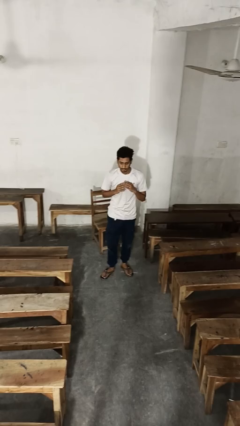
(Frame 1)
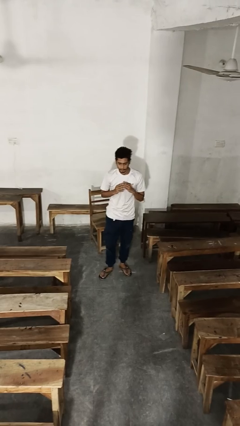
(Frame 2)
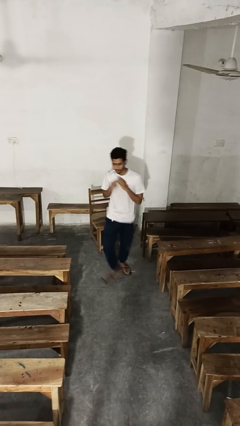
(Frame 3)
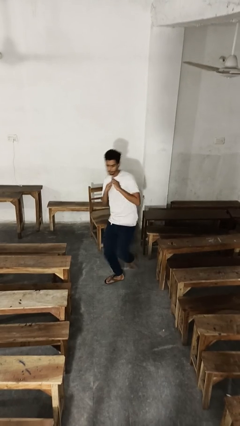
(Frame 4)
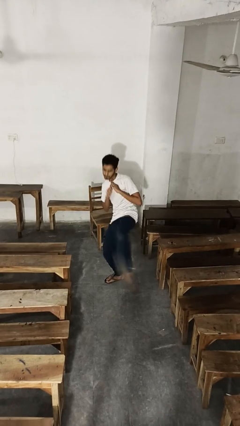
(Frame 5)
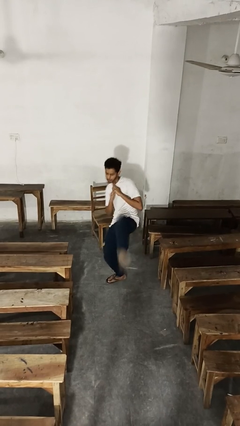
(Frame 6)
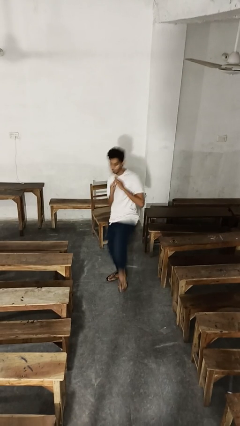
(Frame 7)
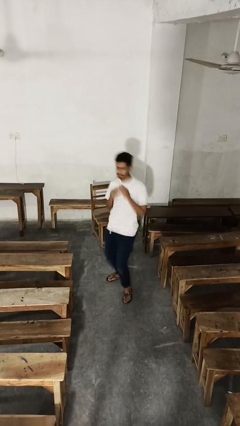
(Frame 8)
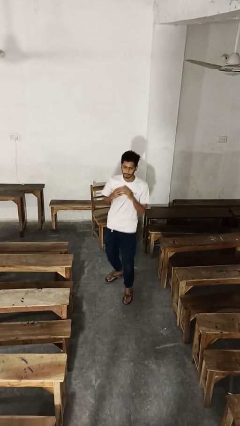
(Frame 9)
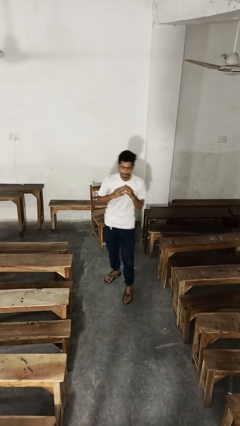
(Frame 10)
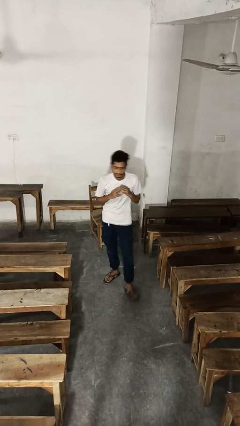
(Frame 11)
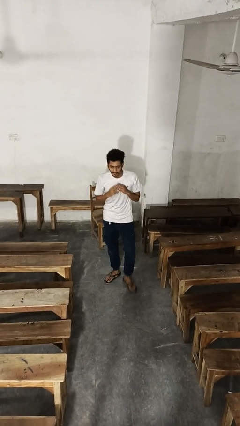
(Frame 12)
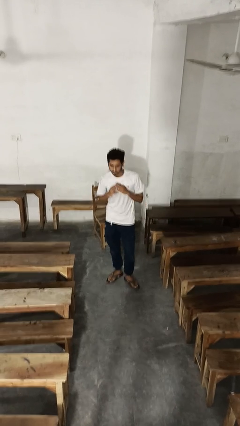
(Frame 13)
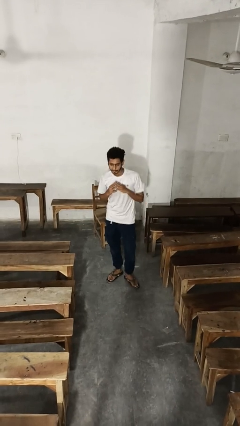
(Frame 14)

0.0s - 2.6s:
person karate kicks

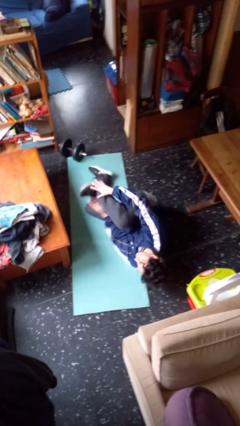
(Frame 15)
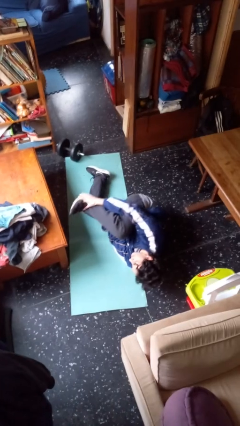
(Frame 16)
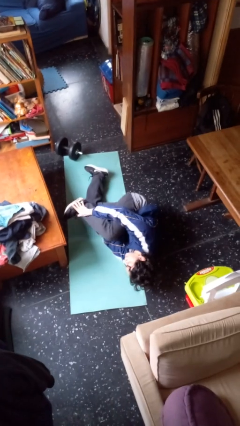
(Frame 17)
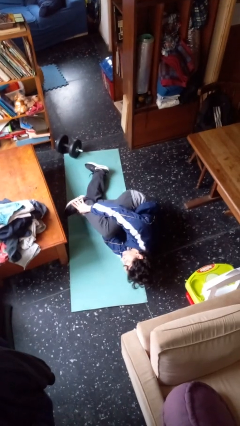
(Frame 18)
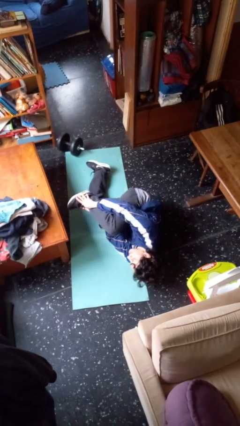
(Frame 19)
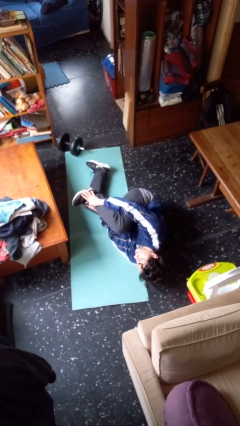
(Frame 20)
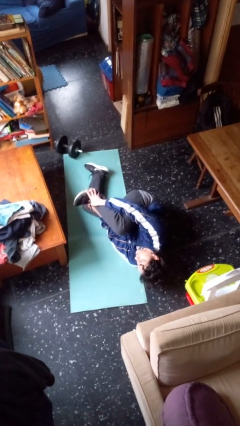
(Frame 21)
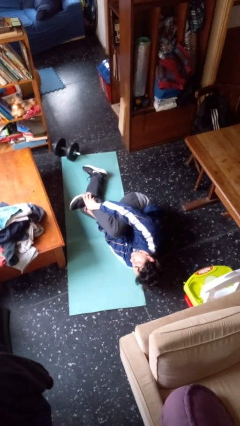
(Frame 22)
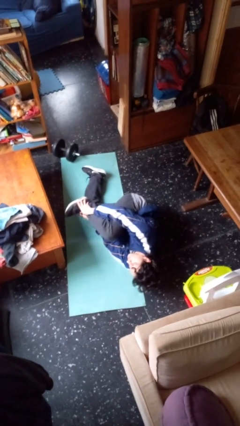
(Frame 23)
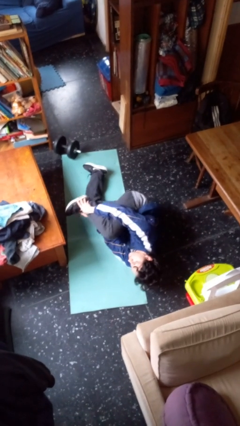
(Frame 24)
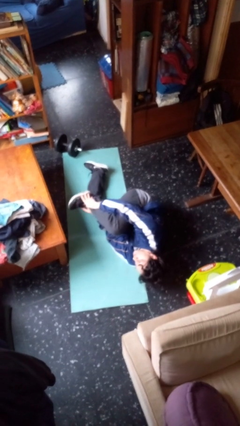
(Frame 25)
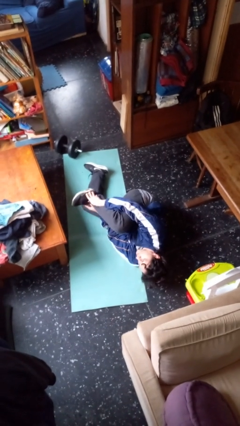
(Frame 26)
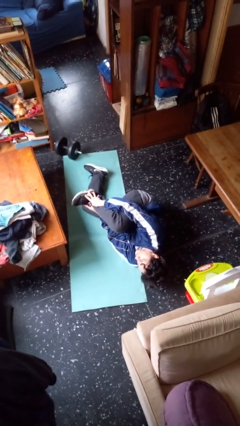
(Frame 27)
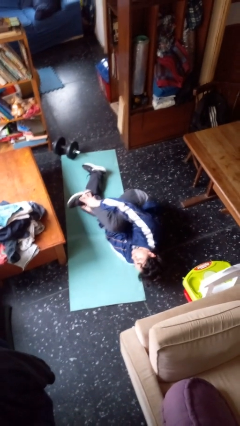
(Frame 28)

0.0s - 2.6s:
person lies down on floor

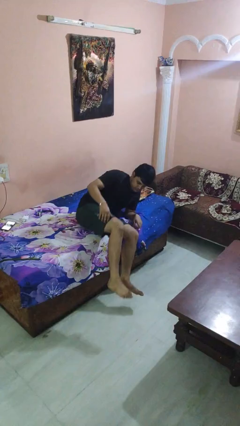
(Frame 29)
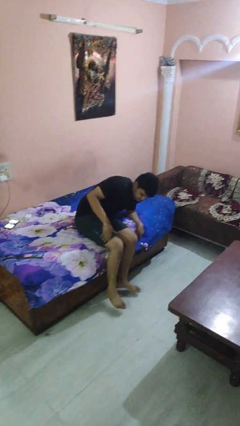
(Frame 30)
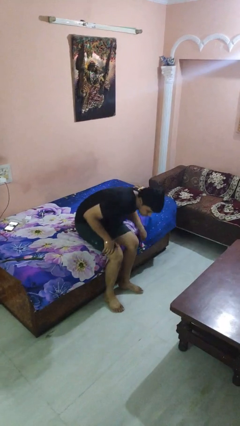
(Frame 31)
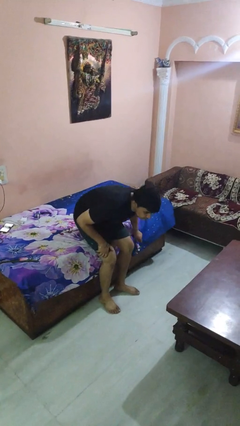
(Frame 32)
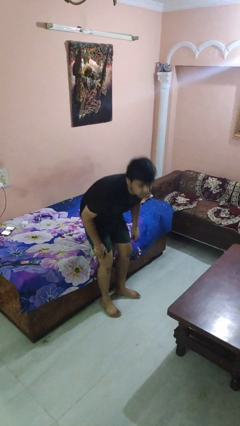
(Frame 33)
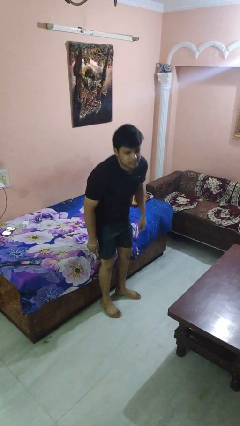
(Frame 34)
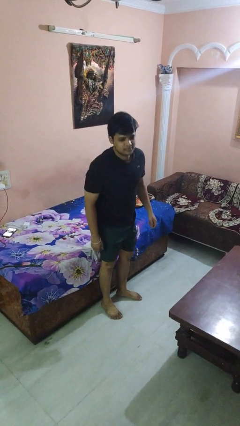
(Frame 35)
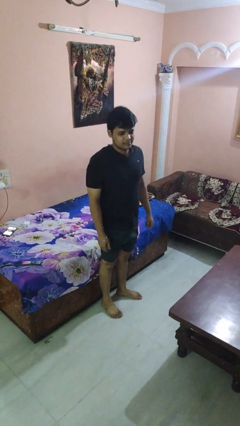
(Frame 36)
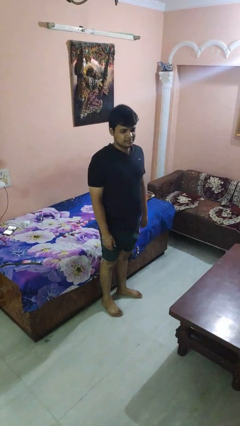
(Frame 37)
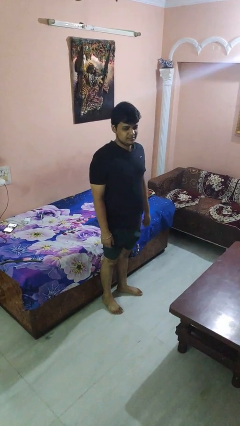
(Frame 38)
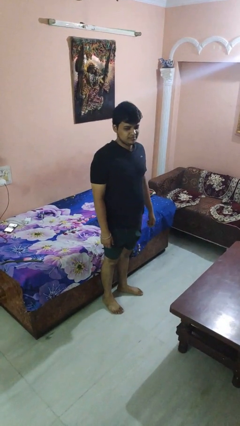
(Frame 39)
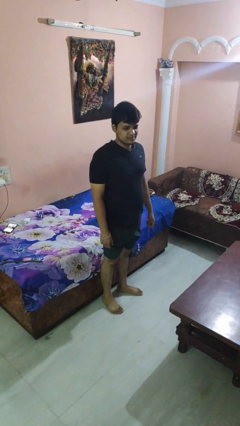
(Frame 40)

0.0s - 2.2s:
person stands up

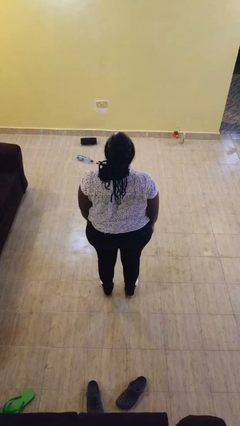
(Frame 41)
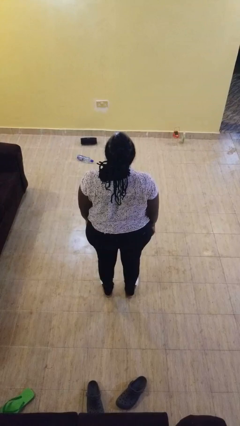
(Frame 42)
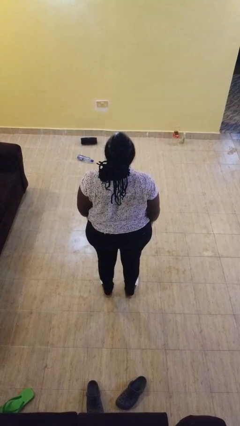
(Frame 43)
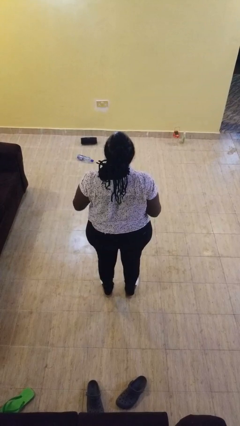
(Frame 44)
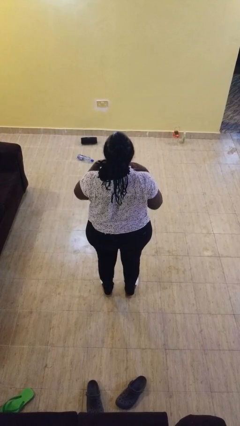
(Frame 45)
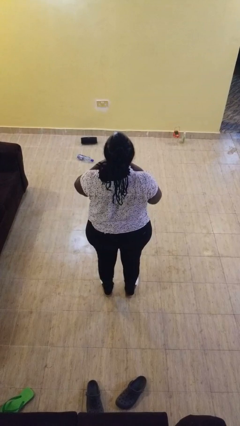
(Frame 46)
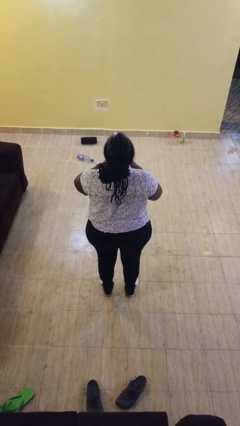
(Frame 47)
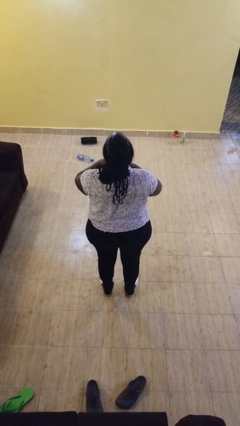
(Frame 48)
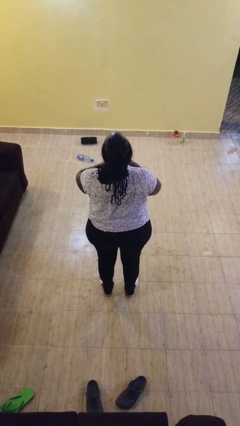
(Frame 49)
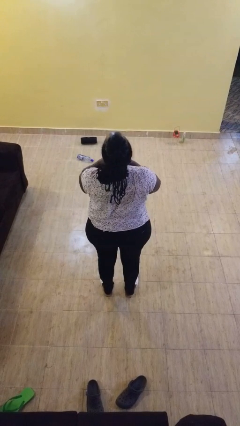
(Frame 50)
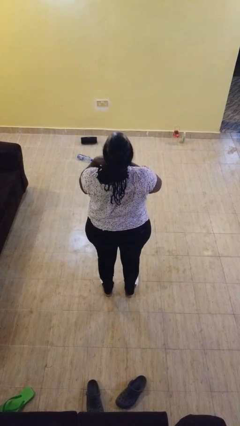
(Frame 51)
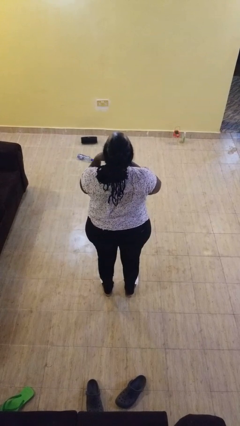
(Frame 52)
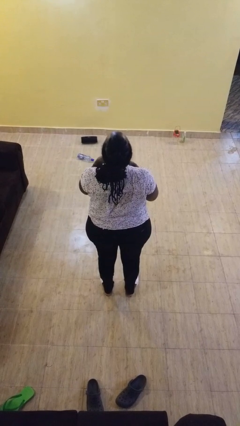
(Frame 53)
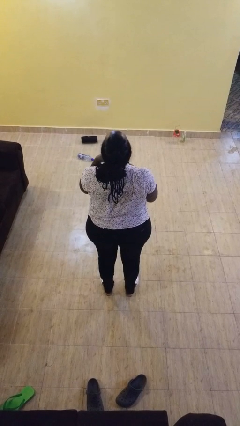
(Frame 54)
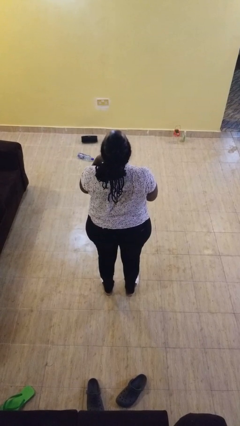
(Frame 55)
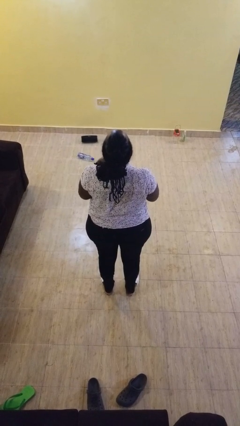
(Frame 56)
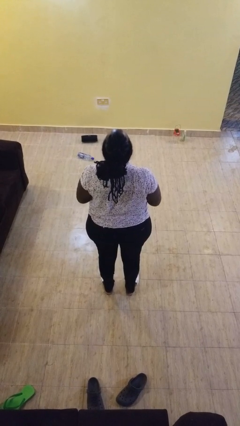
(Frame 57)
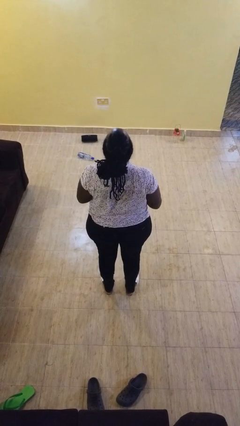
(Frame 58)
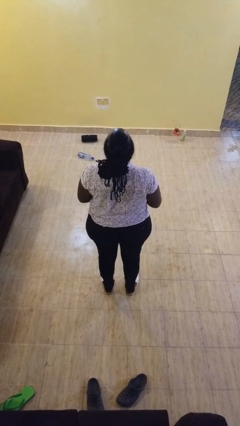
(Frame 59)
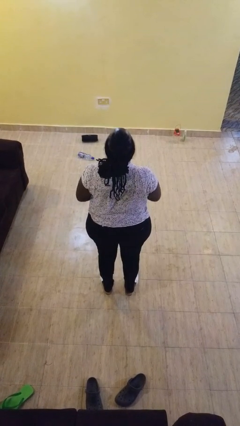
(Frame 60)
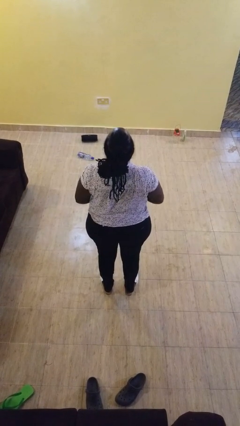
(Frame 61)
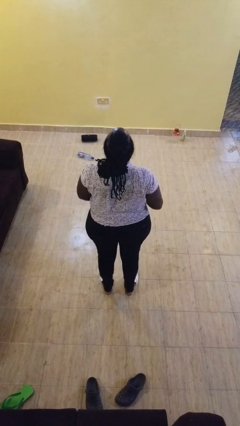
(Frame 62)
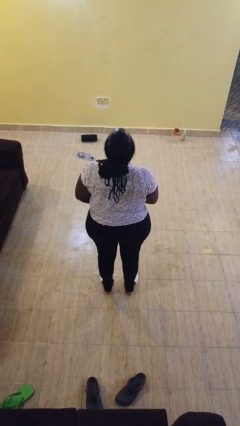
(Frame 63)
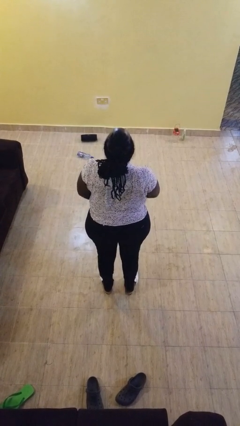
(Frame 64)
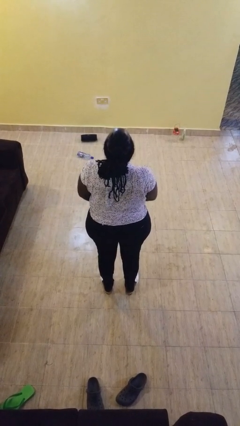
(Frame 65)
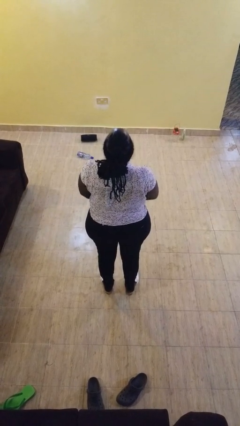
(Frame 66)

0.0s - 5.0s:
person buttons shirt

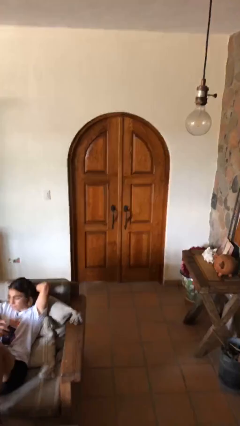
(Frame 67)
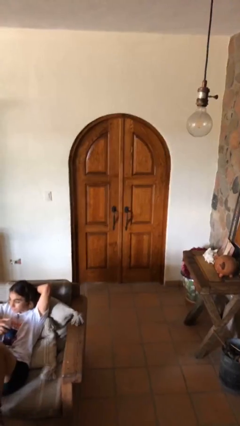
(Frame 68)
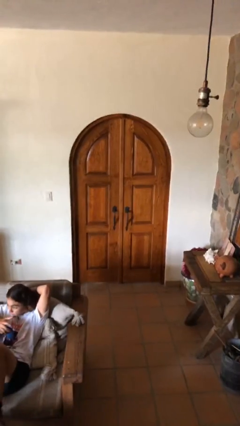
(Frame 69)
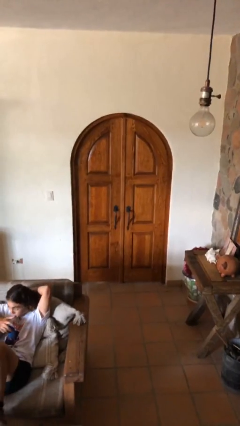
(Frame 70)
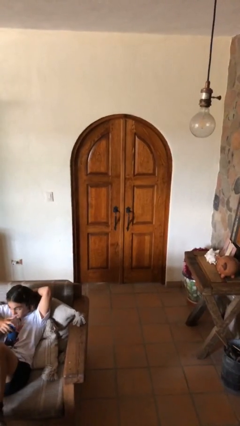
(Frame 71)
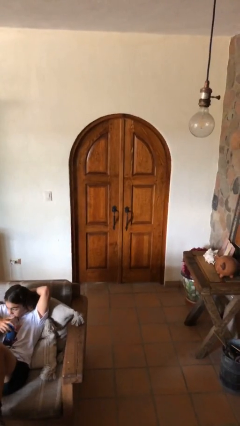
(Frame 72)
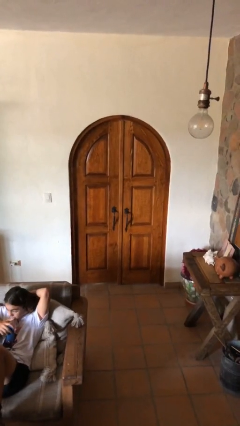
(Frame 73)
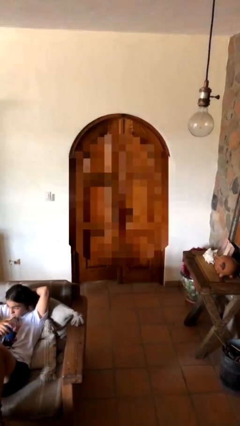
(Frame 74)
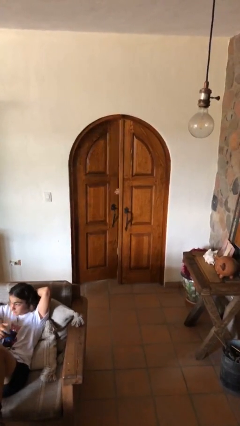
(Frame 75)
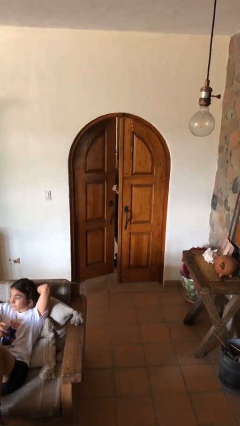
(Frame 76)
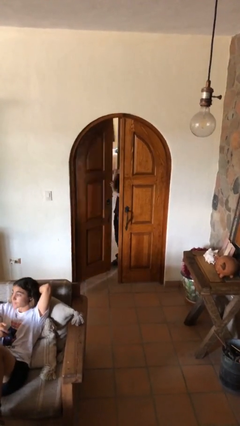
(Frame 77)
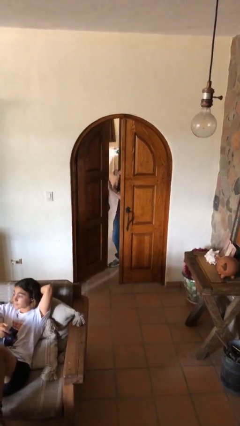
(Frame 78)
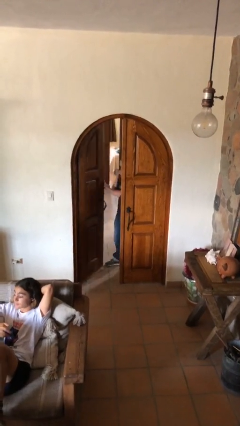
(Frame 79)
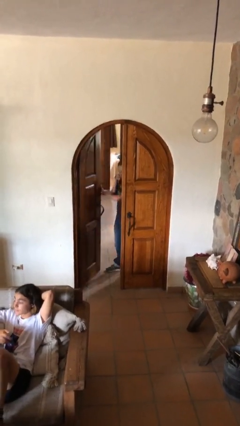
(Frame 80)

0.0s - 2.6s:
person opens facility door

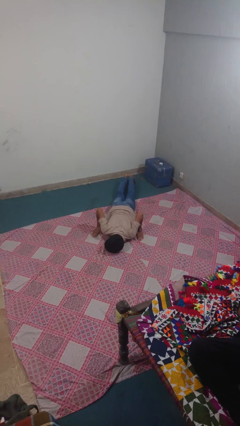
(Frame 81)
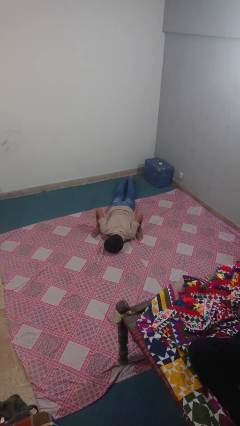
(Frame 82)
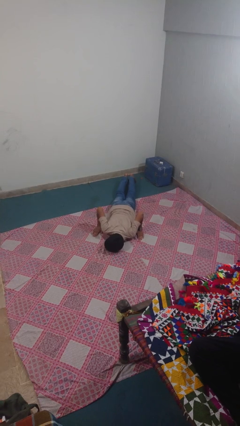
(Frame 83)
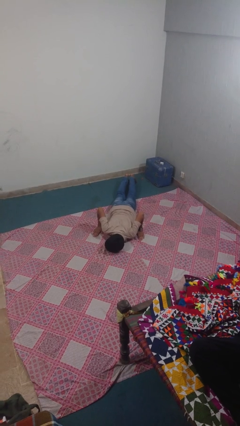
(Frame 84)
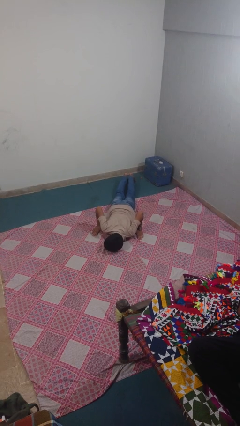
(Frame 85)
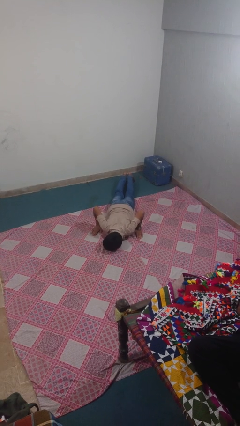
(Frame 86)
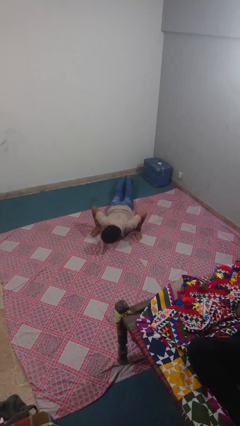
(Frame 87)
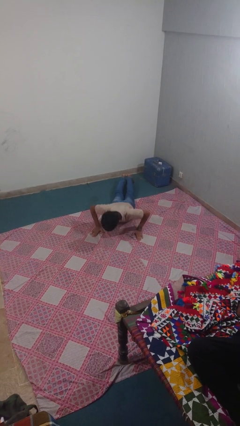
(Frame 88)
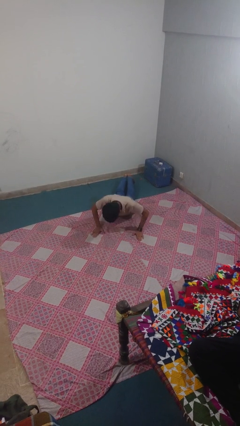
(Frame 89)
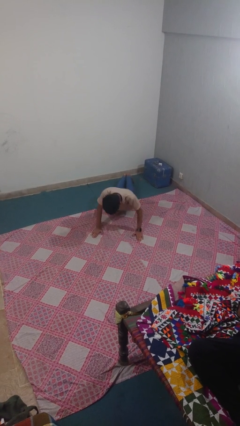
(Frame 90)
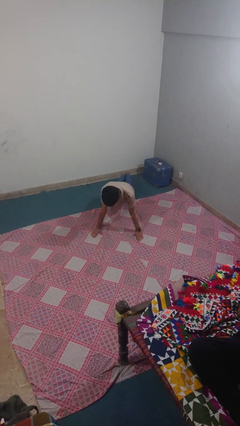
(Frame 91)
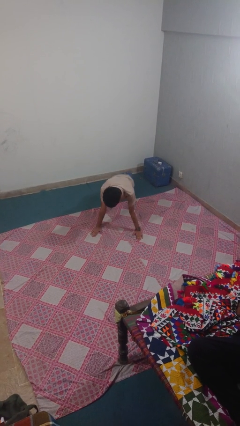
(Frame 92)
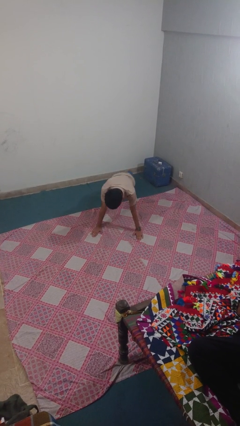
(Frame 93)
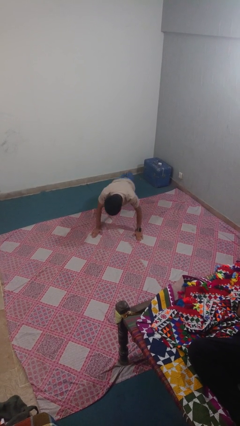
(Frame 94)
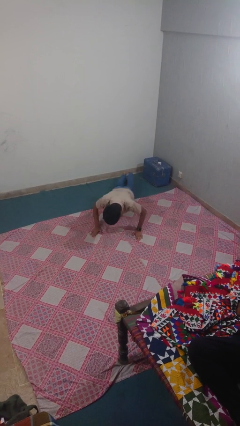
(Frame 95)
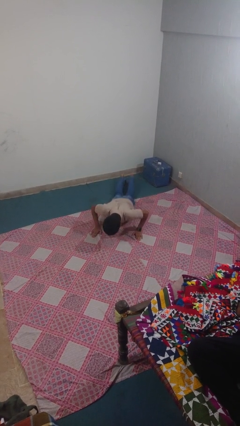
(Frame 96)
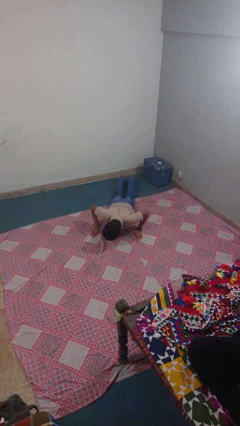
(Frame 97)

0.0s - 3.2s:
person exercises with pushup
